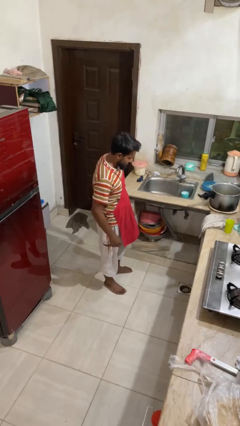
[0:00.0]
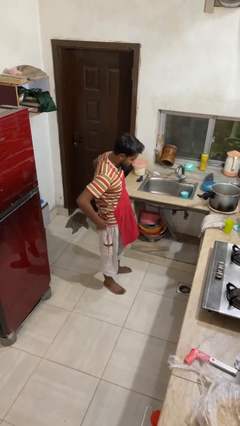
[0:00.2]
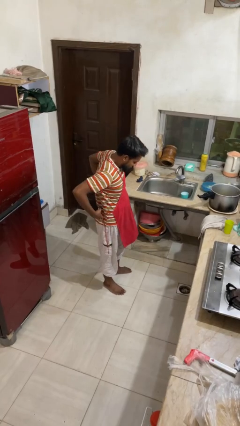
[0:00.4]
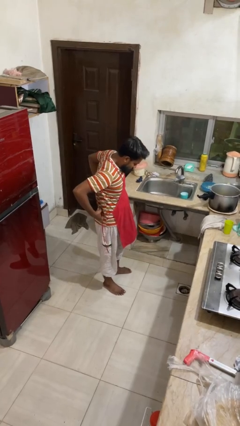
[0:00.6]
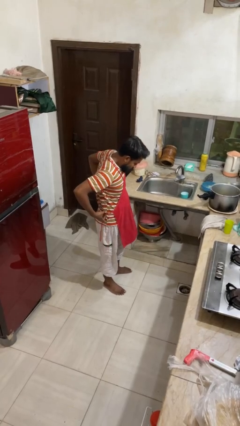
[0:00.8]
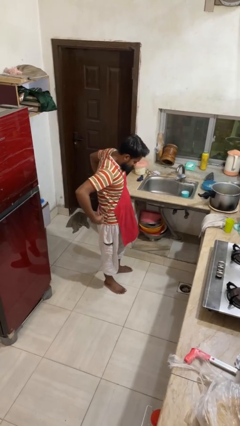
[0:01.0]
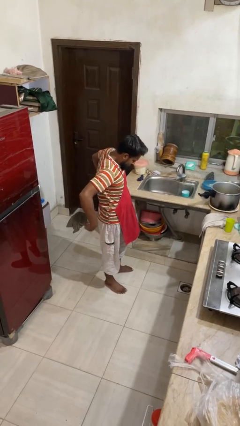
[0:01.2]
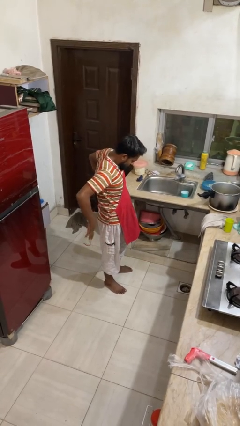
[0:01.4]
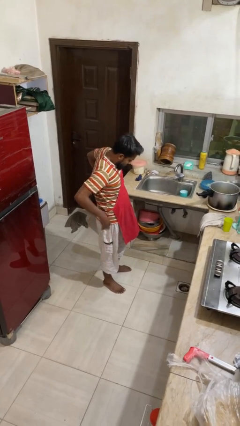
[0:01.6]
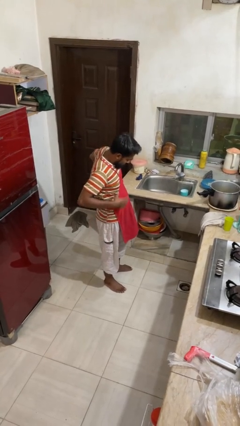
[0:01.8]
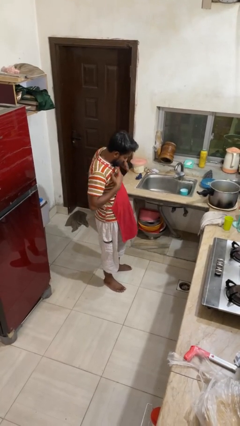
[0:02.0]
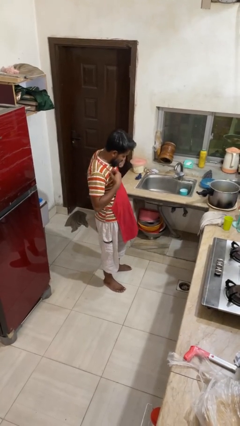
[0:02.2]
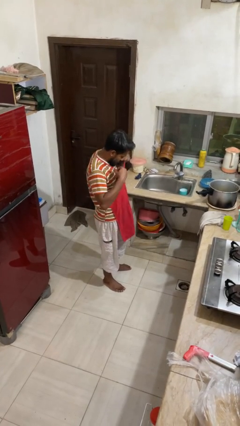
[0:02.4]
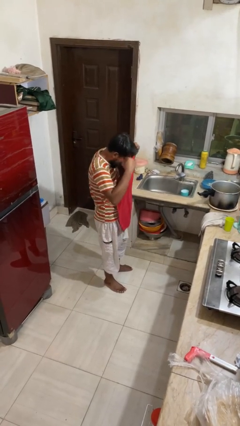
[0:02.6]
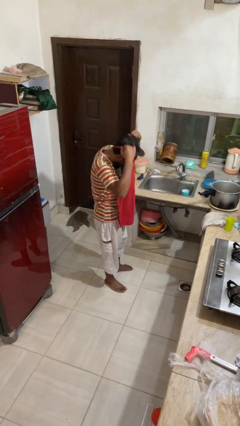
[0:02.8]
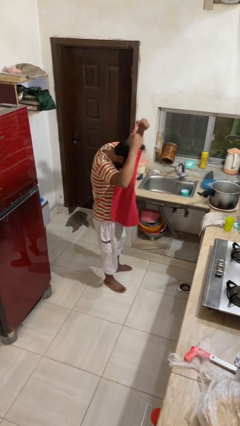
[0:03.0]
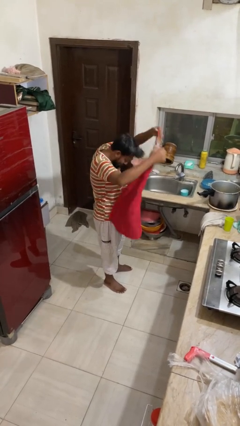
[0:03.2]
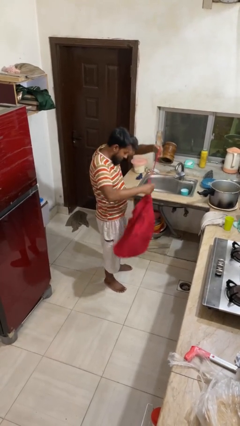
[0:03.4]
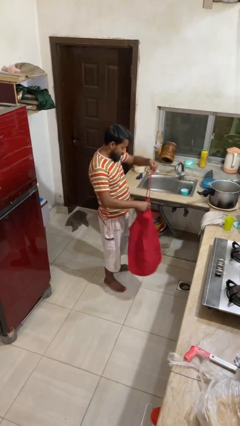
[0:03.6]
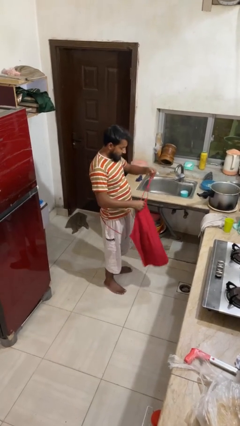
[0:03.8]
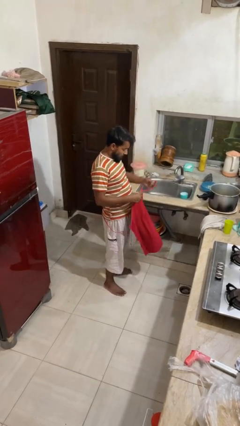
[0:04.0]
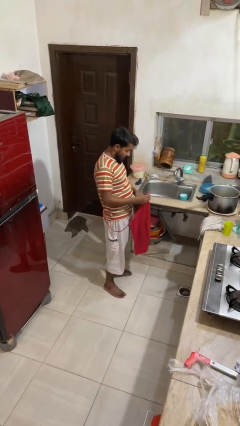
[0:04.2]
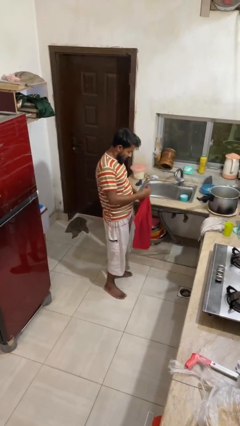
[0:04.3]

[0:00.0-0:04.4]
person takes off apron

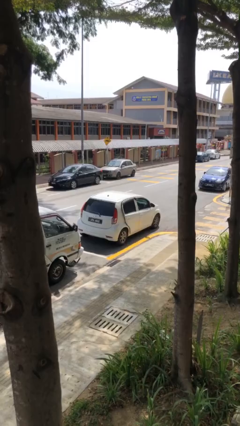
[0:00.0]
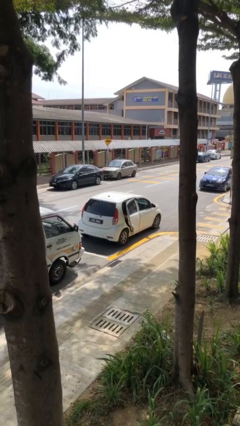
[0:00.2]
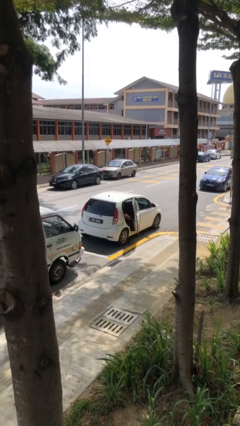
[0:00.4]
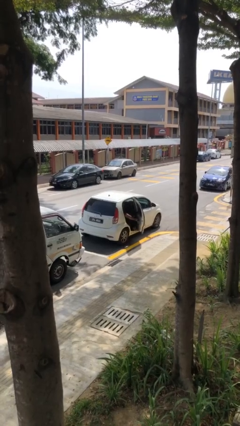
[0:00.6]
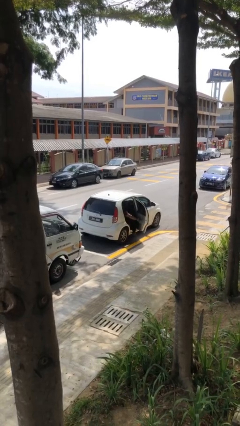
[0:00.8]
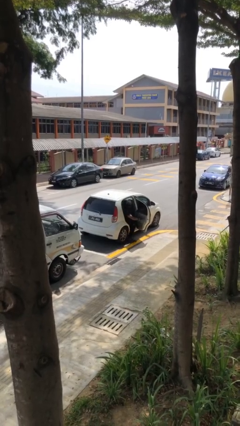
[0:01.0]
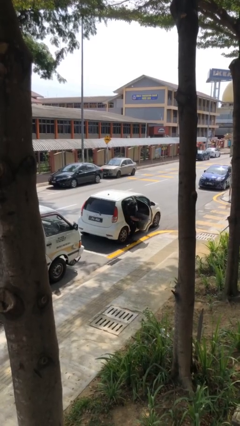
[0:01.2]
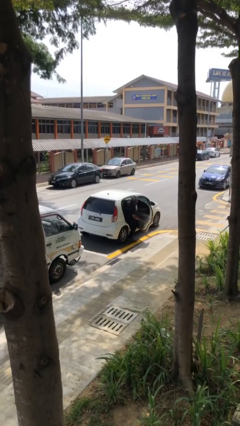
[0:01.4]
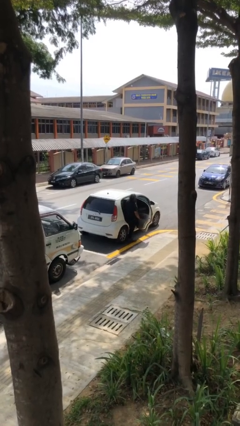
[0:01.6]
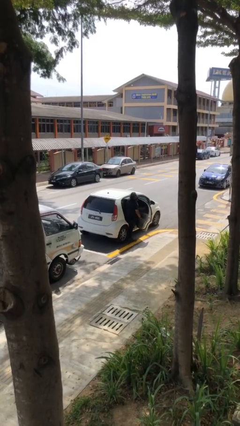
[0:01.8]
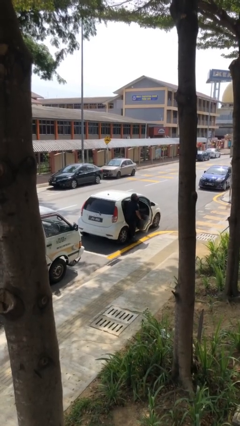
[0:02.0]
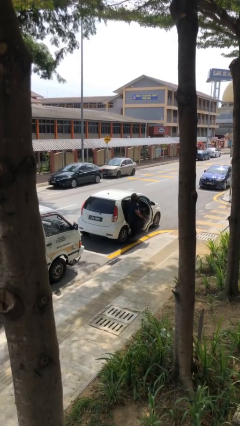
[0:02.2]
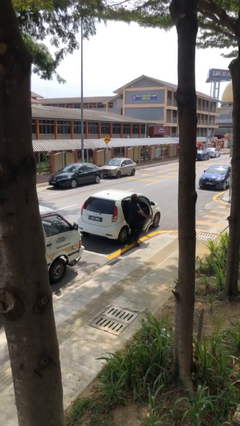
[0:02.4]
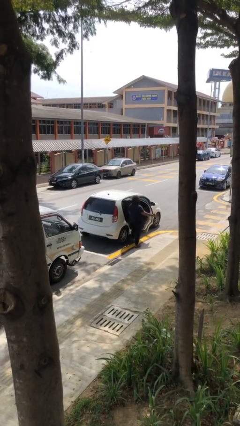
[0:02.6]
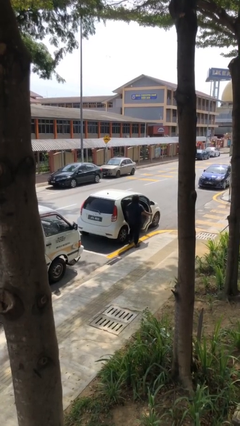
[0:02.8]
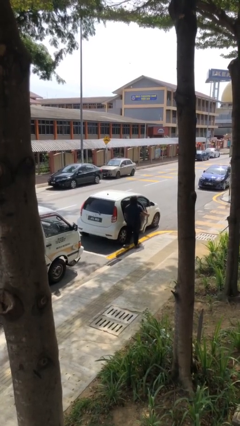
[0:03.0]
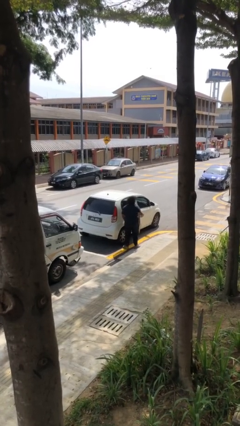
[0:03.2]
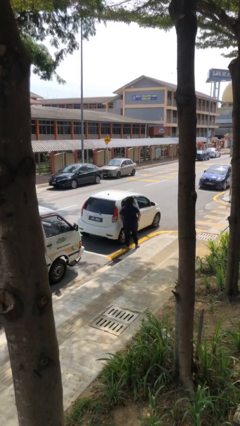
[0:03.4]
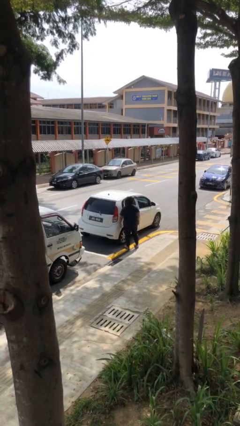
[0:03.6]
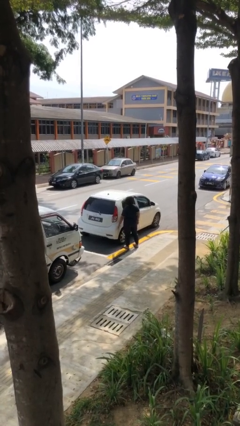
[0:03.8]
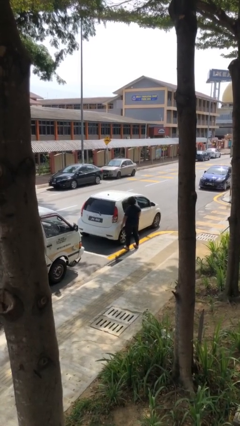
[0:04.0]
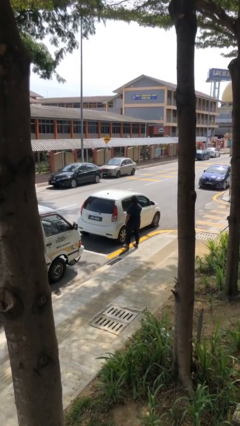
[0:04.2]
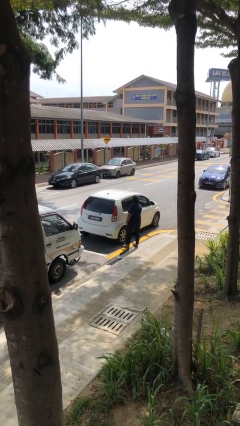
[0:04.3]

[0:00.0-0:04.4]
car drops off person

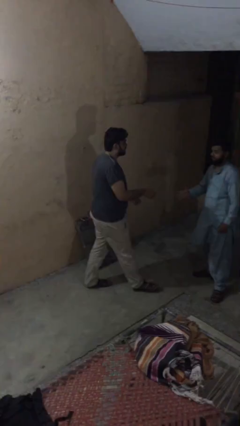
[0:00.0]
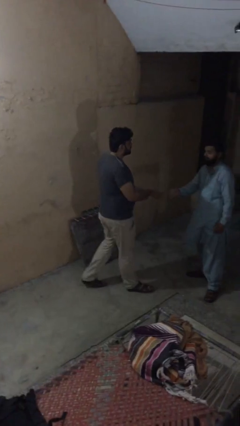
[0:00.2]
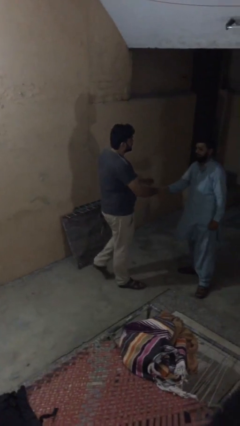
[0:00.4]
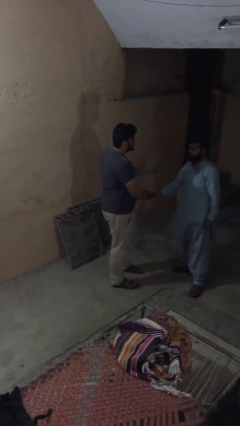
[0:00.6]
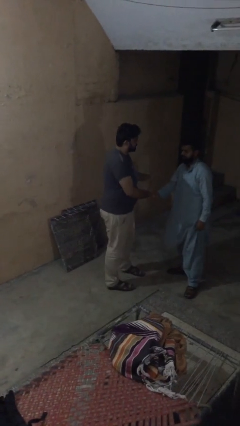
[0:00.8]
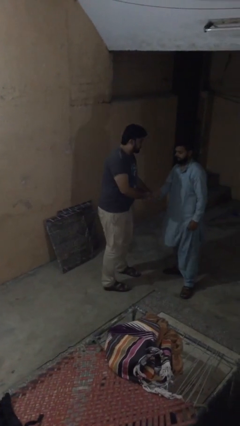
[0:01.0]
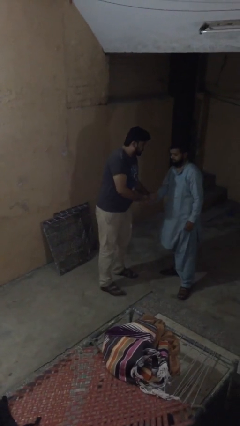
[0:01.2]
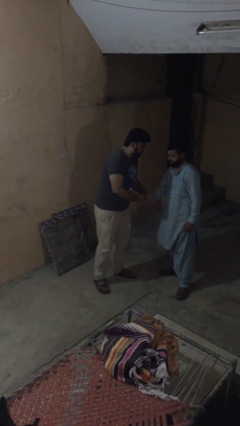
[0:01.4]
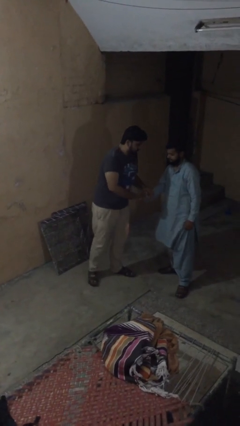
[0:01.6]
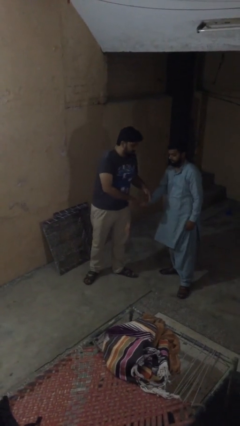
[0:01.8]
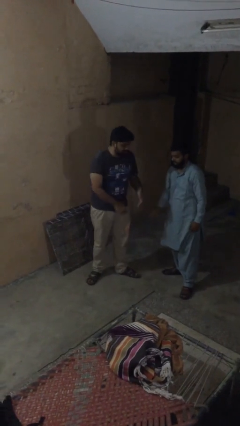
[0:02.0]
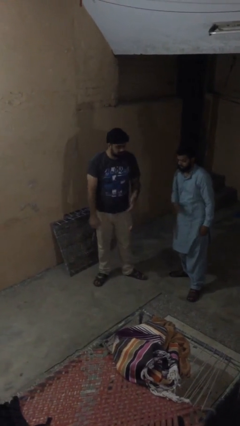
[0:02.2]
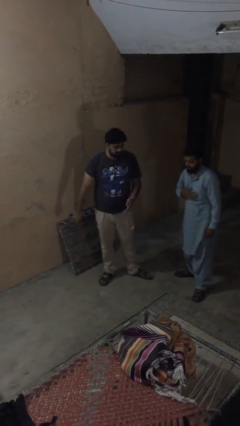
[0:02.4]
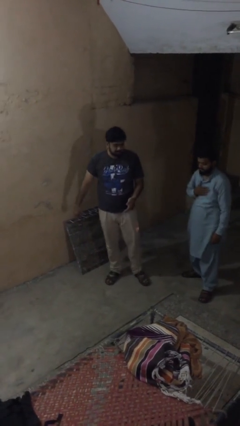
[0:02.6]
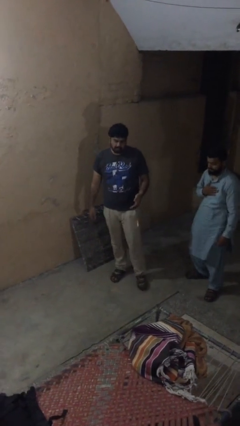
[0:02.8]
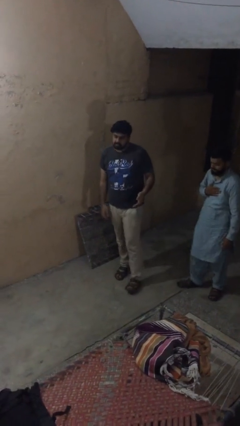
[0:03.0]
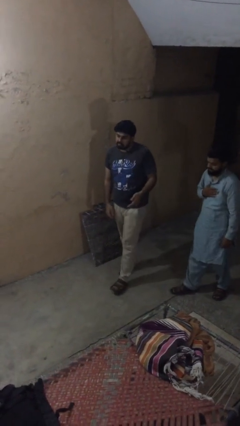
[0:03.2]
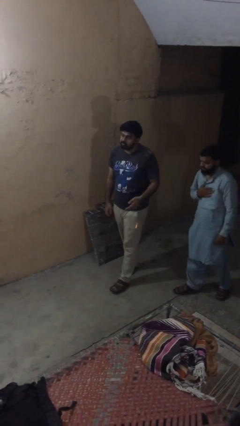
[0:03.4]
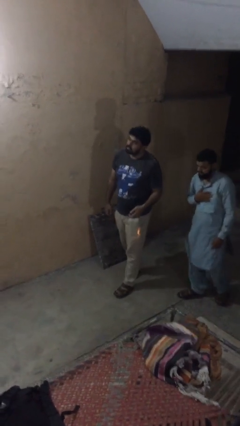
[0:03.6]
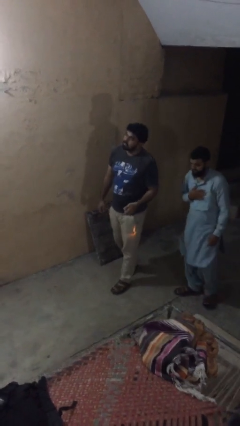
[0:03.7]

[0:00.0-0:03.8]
person shakes hand

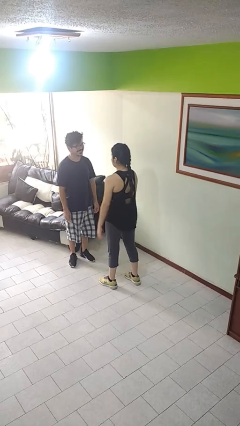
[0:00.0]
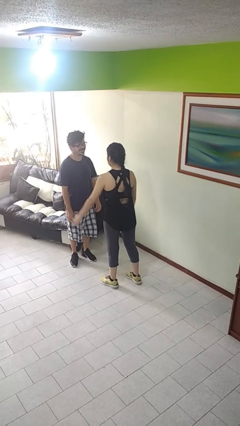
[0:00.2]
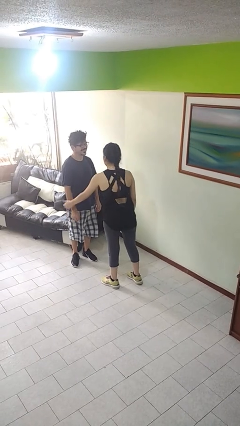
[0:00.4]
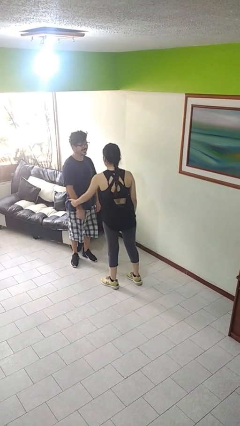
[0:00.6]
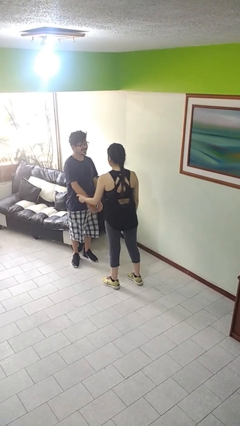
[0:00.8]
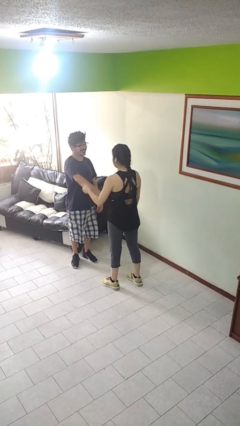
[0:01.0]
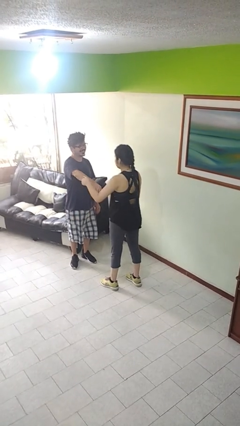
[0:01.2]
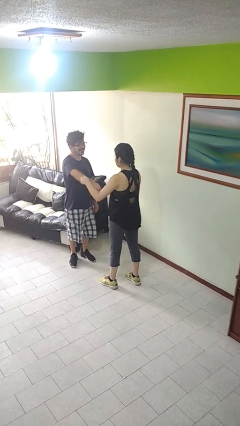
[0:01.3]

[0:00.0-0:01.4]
person grabs person by forearm

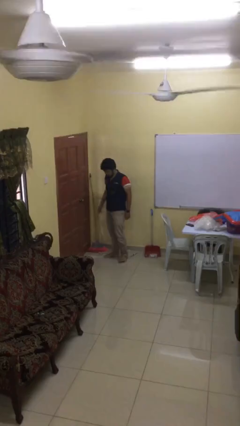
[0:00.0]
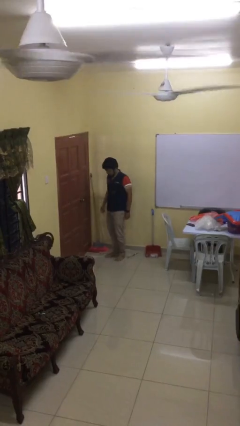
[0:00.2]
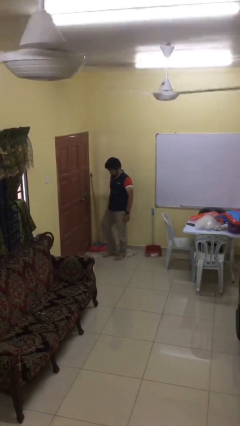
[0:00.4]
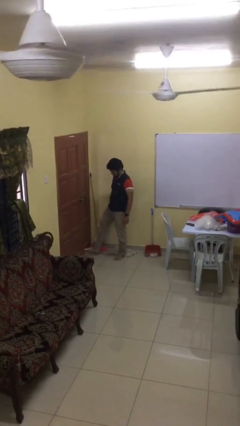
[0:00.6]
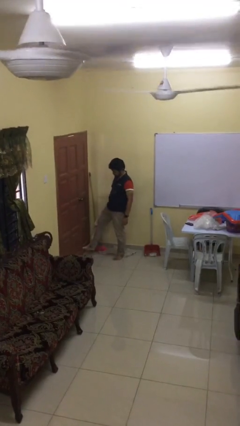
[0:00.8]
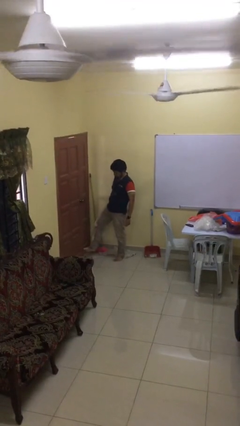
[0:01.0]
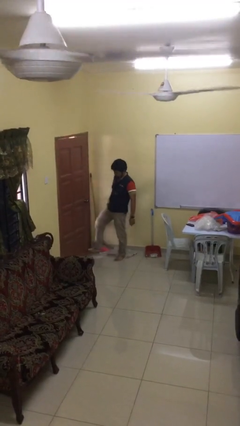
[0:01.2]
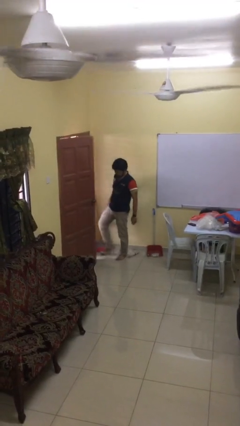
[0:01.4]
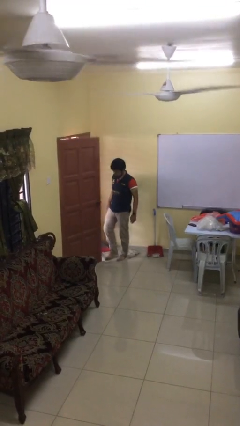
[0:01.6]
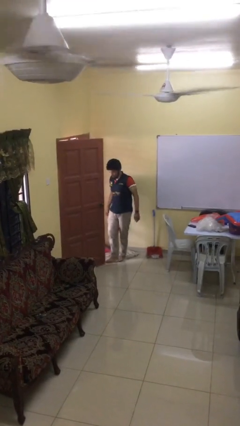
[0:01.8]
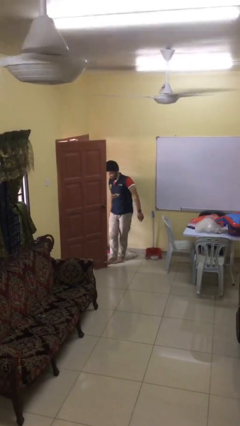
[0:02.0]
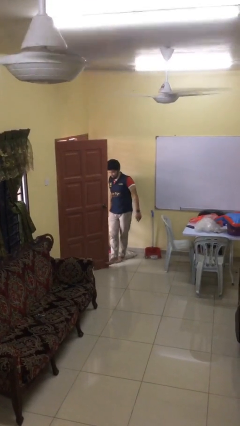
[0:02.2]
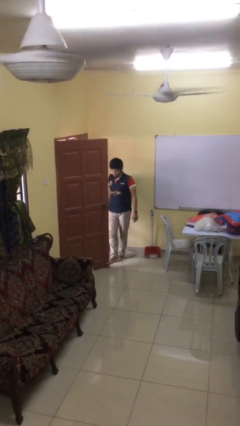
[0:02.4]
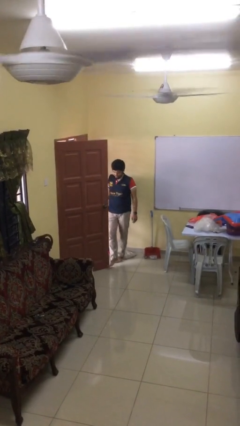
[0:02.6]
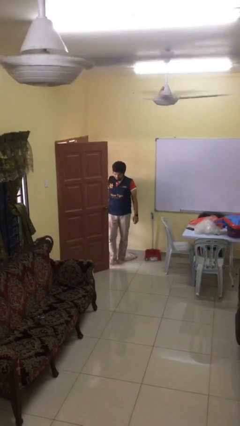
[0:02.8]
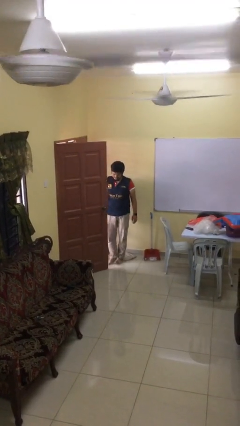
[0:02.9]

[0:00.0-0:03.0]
person opens facility door

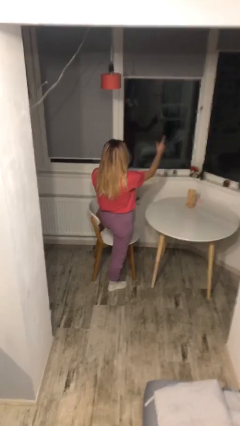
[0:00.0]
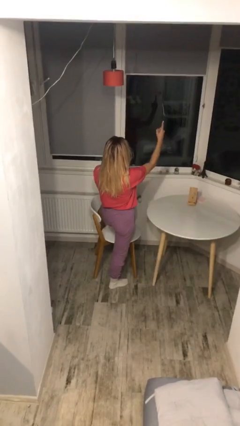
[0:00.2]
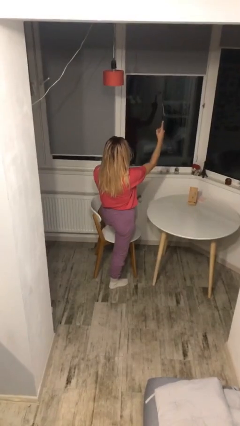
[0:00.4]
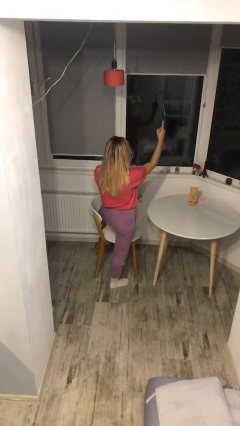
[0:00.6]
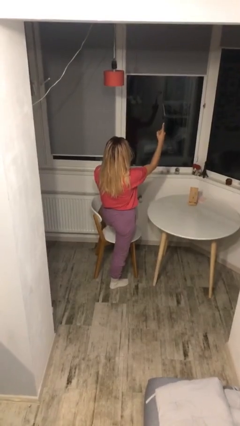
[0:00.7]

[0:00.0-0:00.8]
person gestures number one
